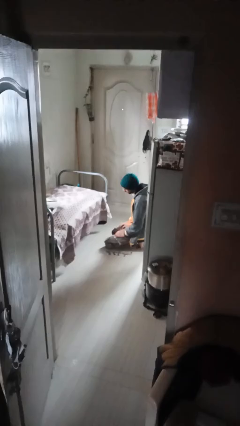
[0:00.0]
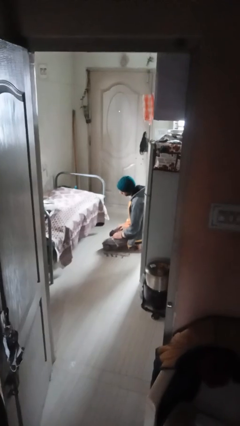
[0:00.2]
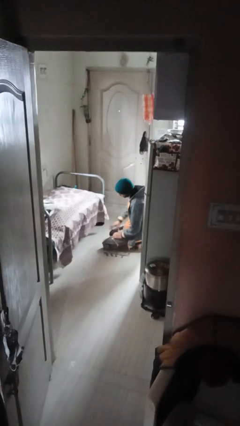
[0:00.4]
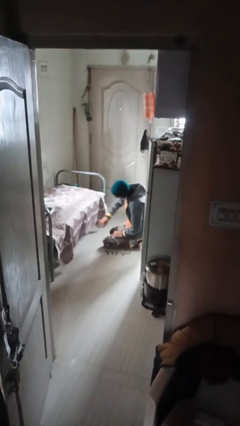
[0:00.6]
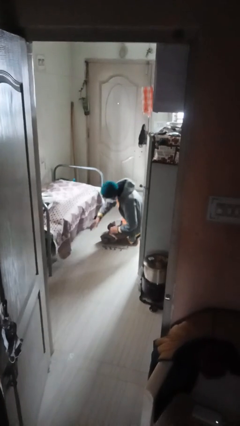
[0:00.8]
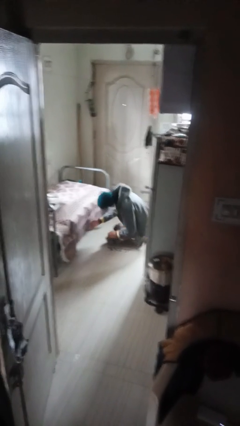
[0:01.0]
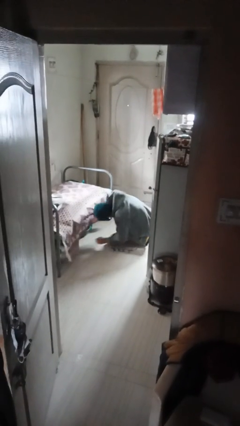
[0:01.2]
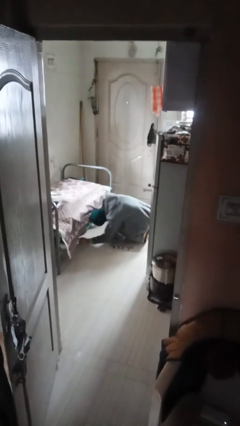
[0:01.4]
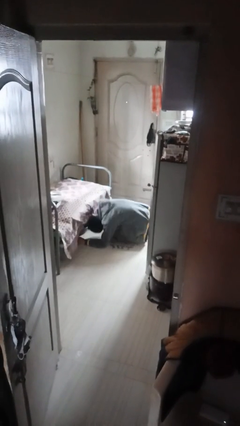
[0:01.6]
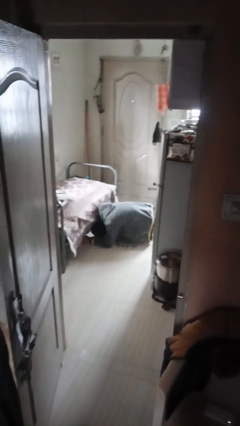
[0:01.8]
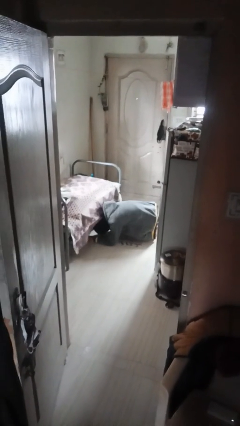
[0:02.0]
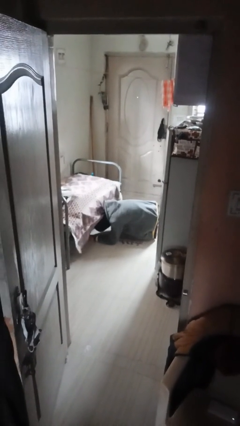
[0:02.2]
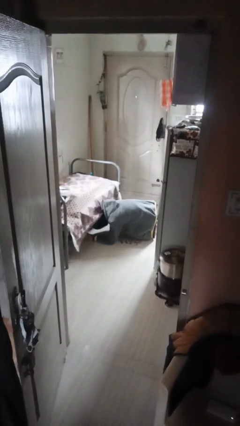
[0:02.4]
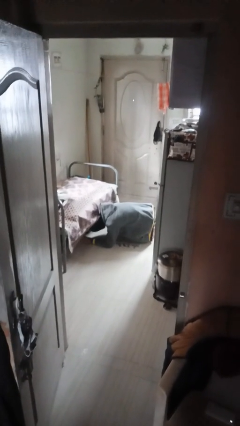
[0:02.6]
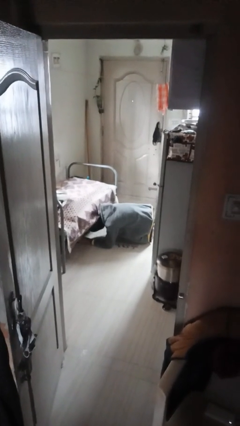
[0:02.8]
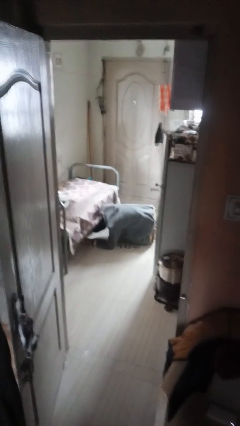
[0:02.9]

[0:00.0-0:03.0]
person searches under bed

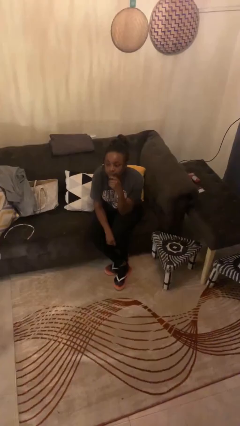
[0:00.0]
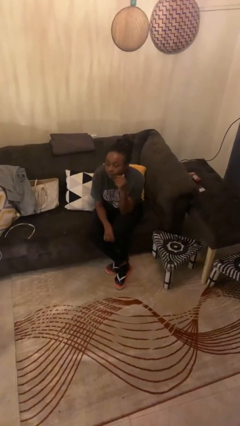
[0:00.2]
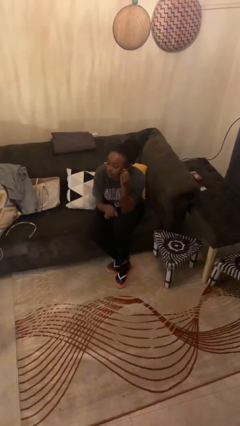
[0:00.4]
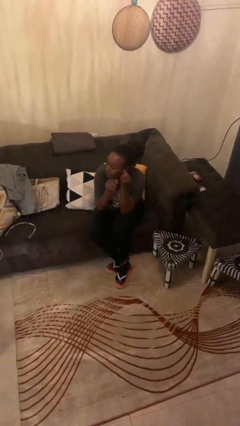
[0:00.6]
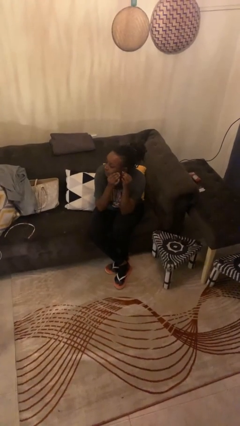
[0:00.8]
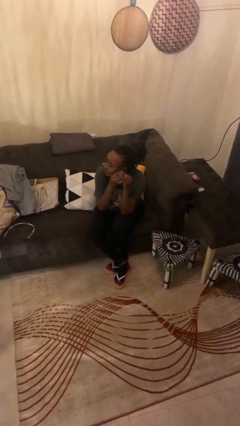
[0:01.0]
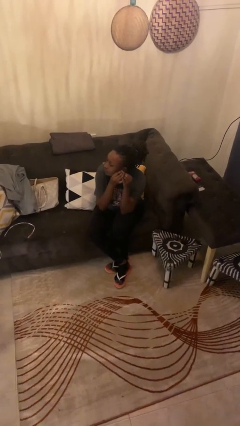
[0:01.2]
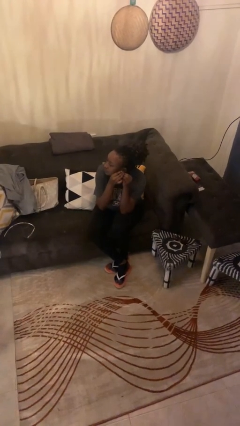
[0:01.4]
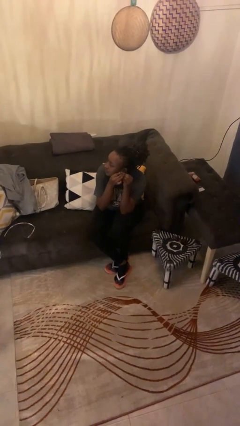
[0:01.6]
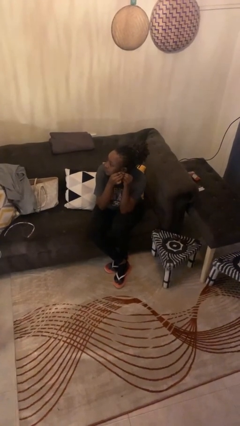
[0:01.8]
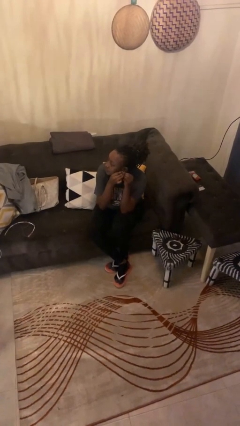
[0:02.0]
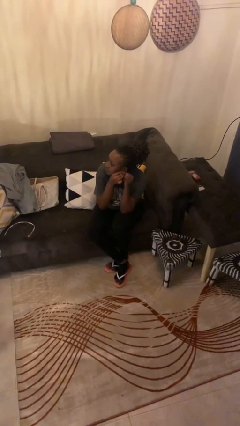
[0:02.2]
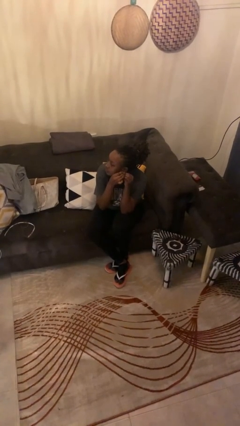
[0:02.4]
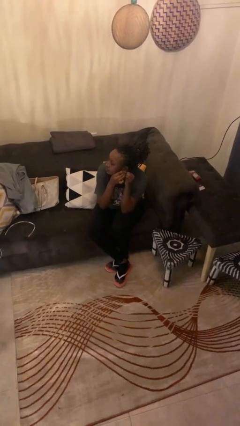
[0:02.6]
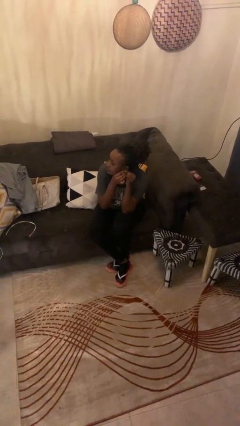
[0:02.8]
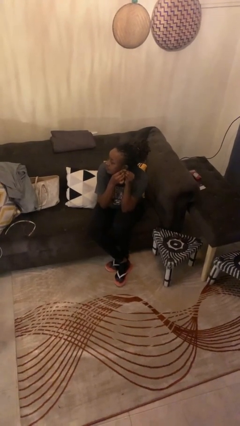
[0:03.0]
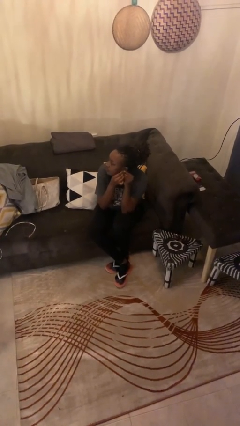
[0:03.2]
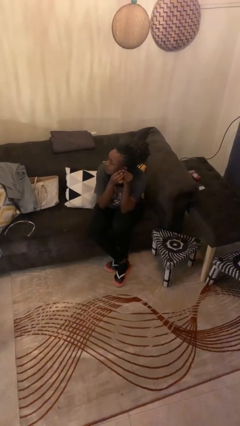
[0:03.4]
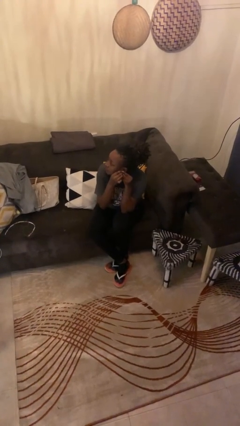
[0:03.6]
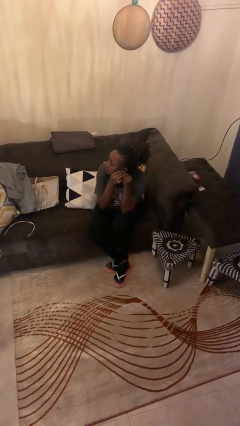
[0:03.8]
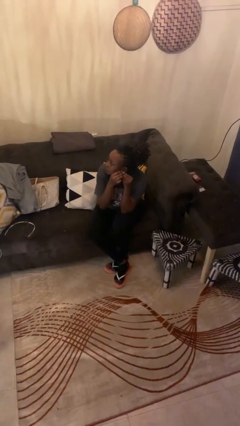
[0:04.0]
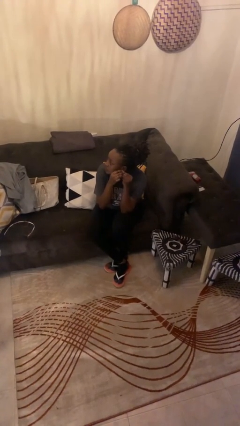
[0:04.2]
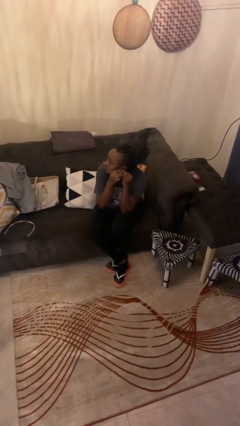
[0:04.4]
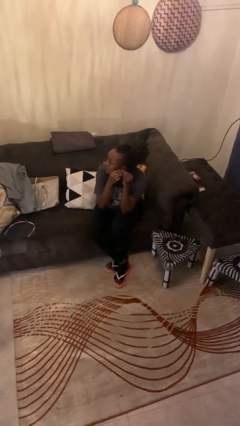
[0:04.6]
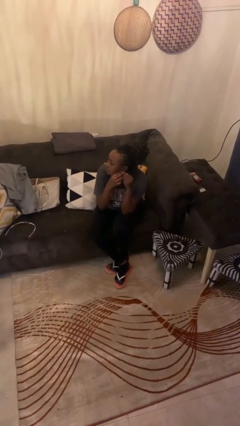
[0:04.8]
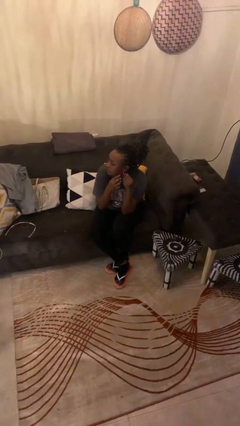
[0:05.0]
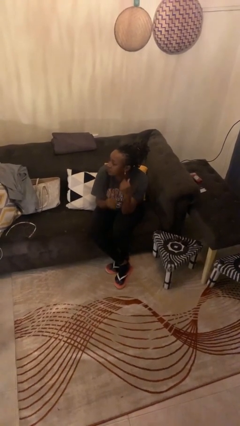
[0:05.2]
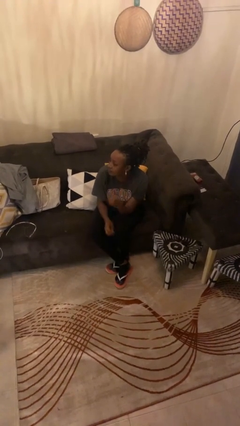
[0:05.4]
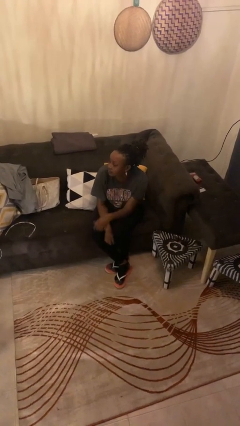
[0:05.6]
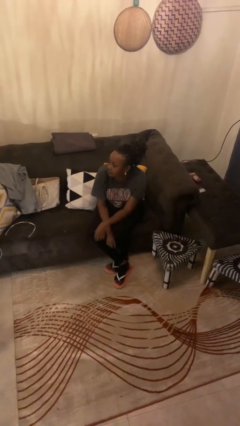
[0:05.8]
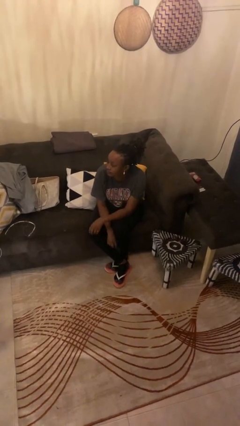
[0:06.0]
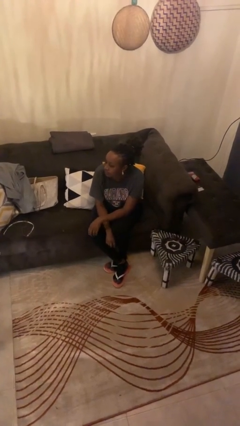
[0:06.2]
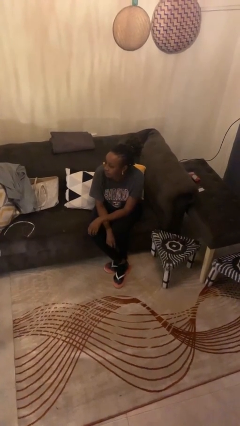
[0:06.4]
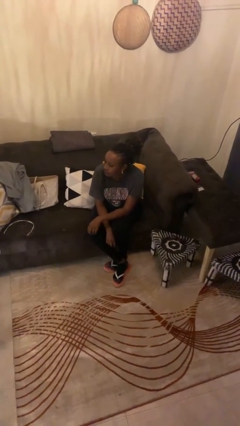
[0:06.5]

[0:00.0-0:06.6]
person puts on earrings

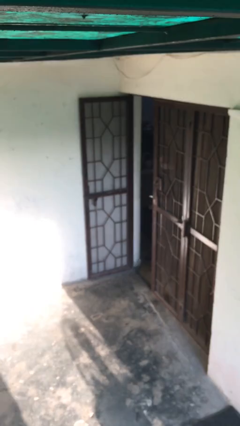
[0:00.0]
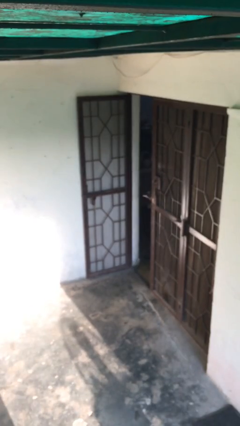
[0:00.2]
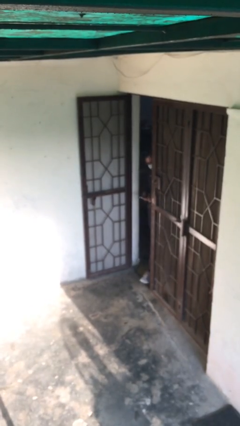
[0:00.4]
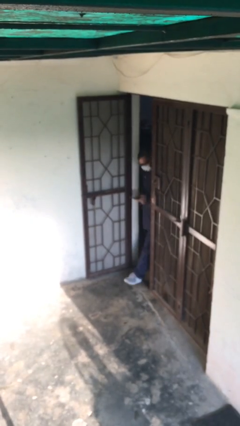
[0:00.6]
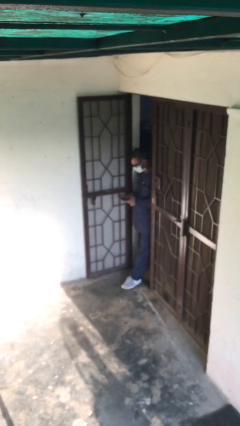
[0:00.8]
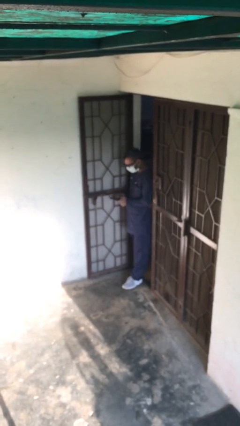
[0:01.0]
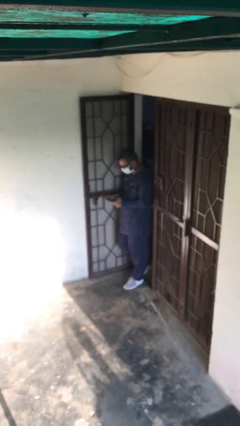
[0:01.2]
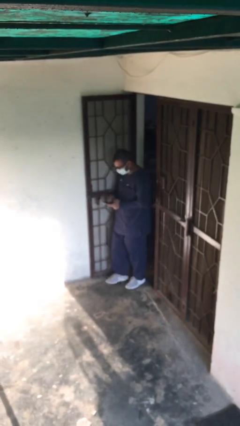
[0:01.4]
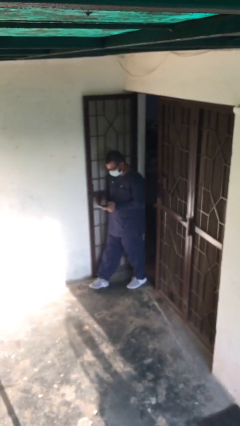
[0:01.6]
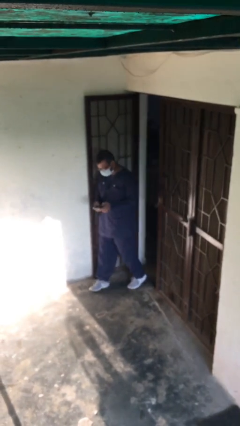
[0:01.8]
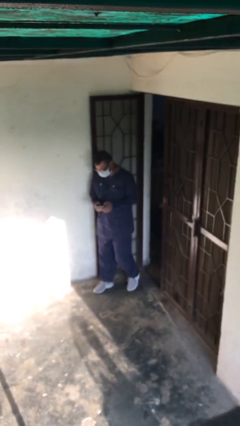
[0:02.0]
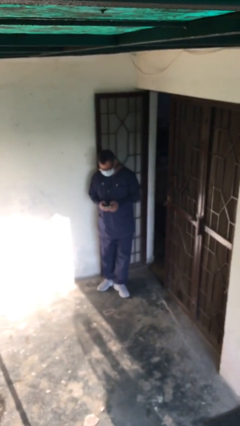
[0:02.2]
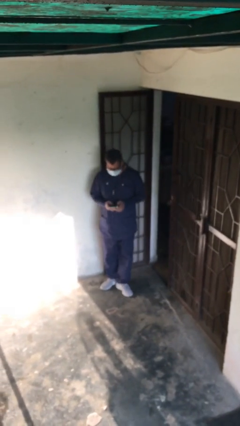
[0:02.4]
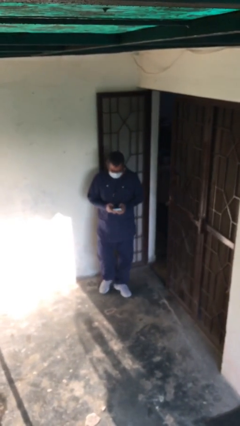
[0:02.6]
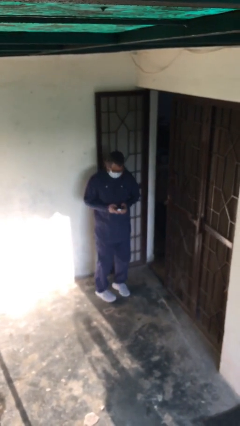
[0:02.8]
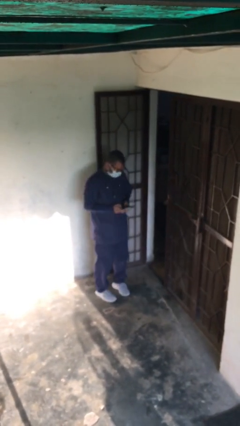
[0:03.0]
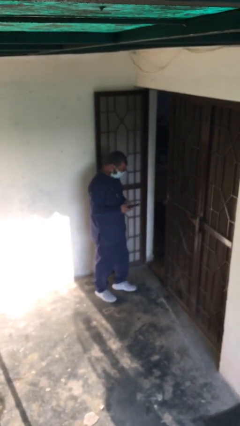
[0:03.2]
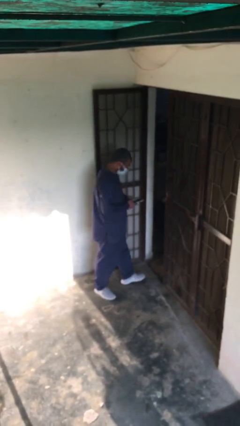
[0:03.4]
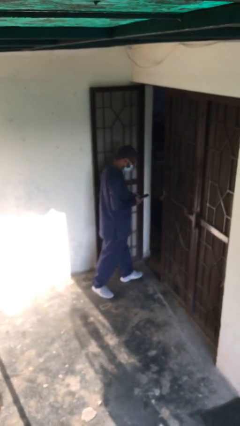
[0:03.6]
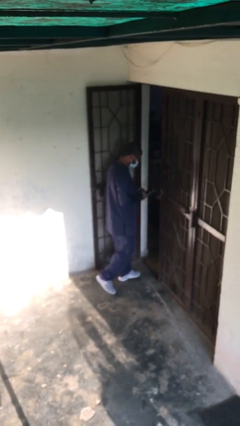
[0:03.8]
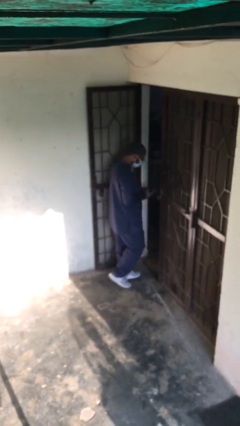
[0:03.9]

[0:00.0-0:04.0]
person enters scene through structure

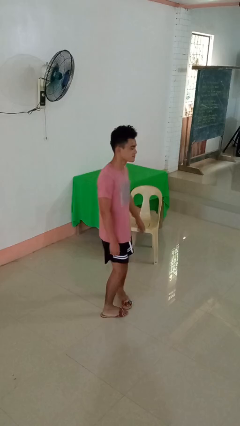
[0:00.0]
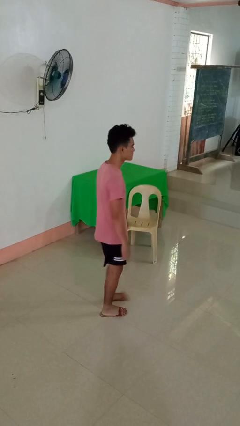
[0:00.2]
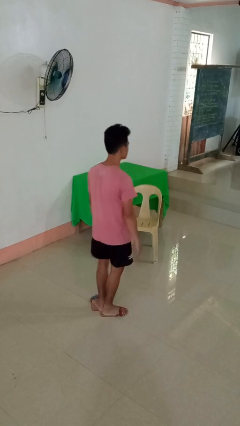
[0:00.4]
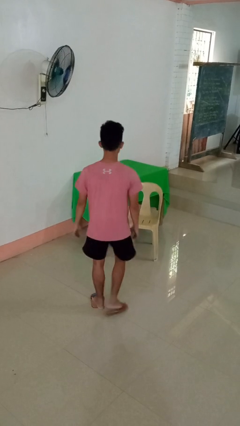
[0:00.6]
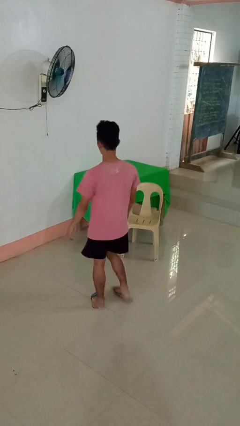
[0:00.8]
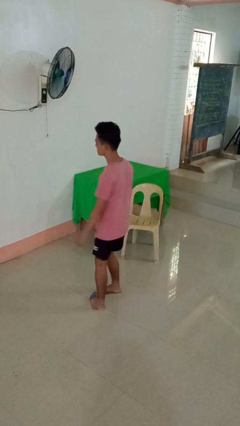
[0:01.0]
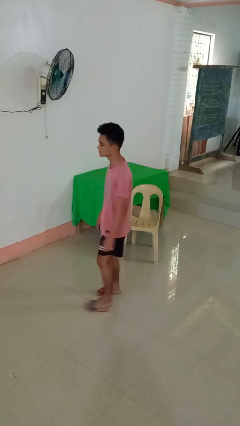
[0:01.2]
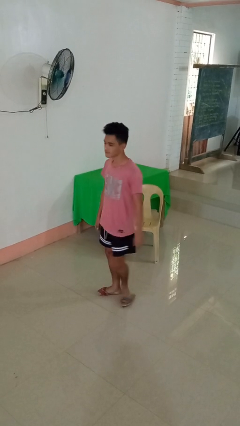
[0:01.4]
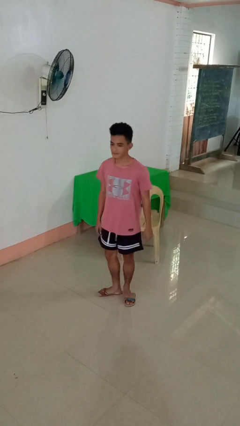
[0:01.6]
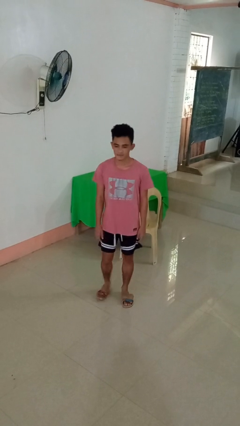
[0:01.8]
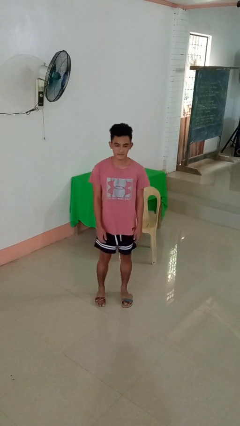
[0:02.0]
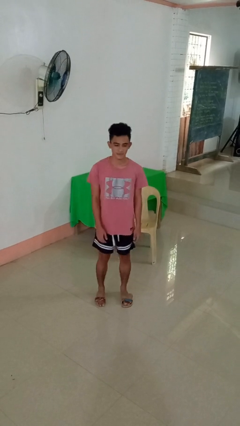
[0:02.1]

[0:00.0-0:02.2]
person twirls

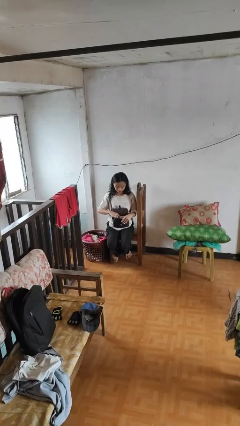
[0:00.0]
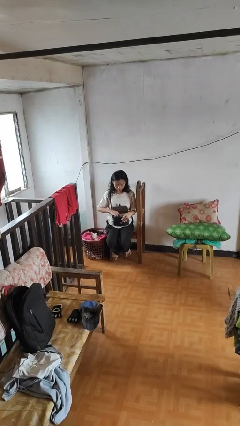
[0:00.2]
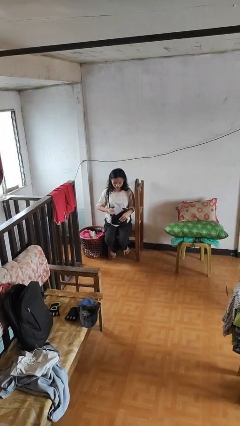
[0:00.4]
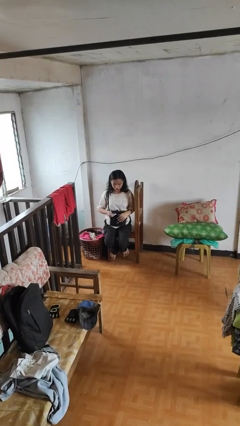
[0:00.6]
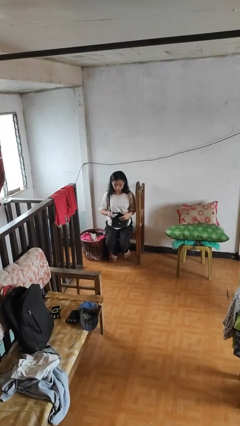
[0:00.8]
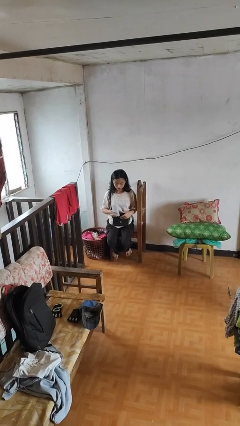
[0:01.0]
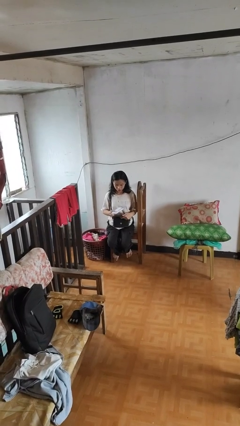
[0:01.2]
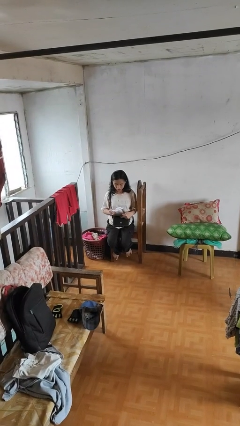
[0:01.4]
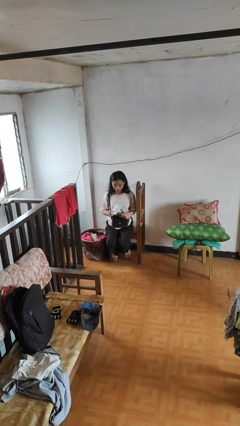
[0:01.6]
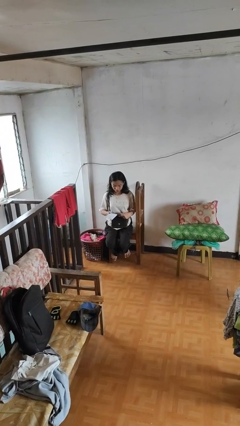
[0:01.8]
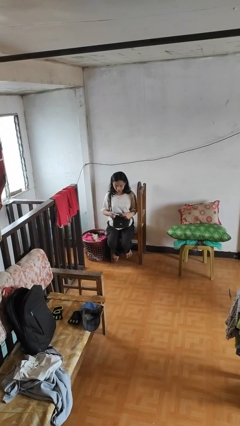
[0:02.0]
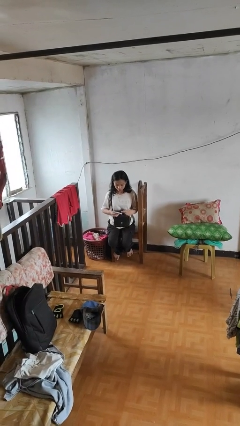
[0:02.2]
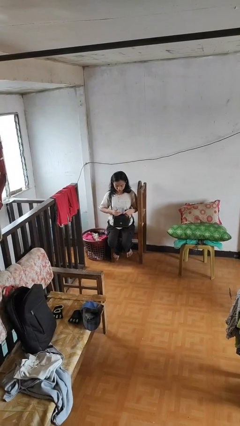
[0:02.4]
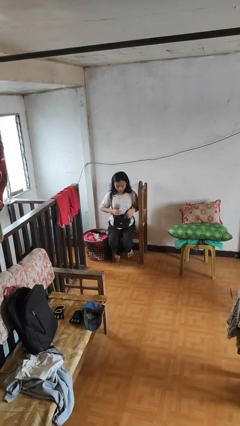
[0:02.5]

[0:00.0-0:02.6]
person takes object from purse
